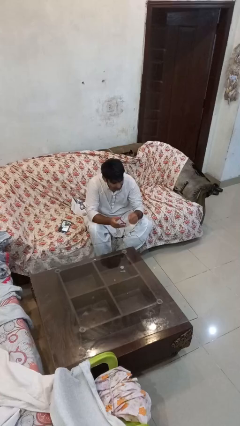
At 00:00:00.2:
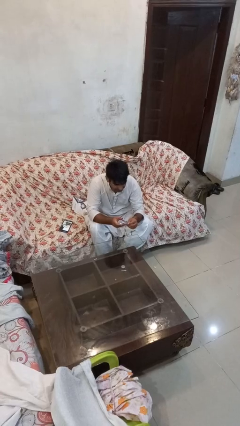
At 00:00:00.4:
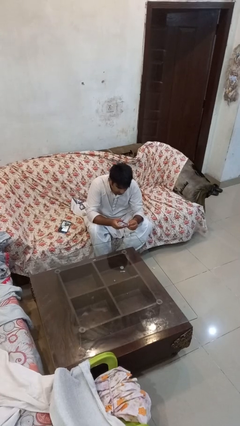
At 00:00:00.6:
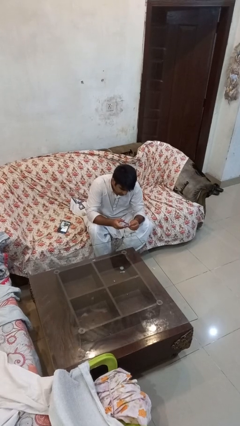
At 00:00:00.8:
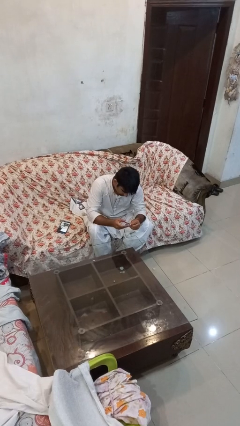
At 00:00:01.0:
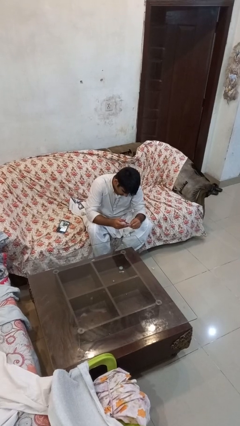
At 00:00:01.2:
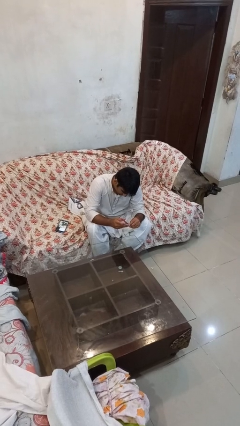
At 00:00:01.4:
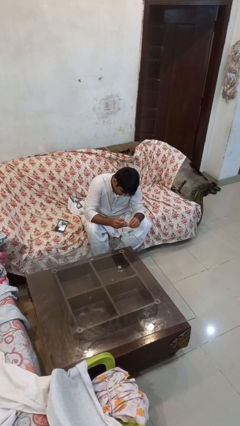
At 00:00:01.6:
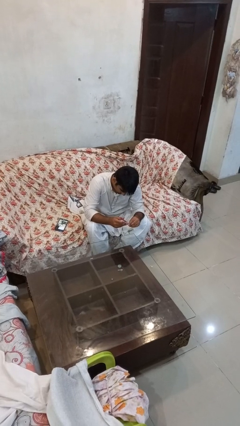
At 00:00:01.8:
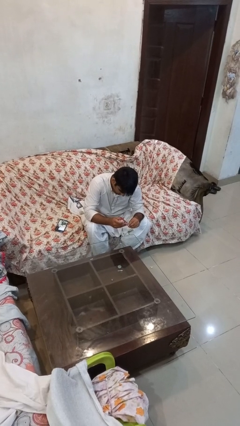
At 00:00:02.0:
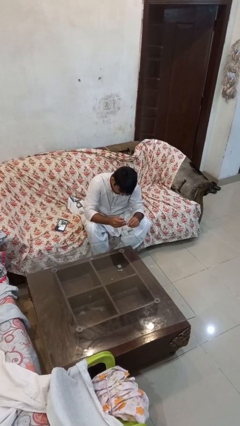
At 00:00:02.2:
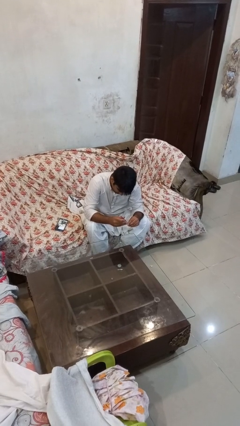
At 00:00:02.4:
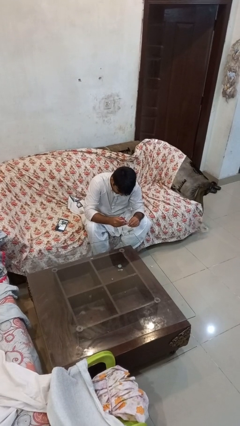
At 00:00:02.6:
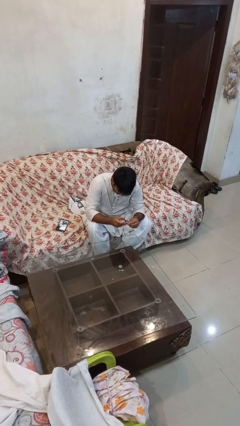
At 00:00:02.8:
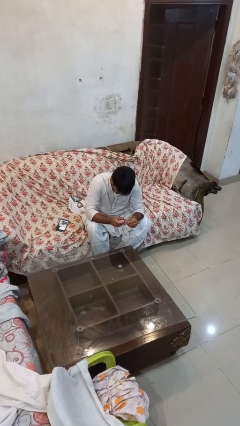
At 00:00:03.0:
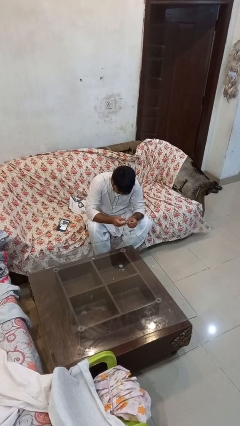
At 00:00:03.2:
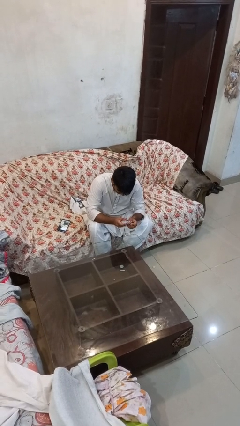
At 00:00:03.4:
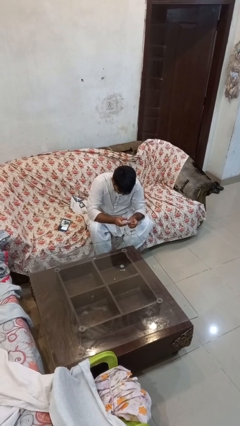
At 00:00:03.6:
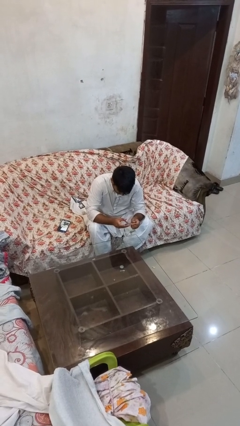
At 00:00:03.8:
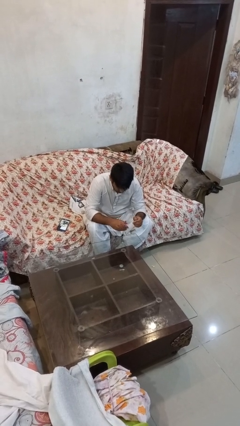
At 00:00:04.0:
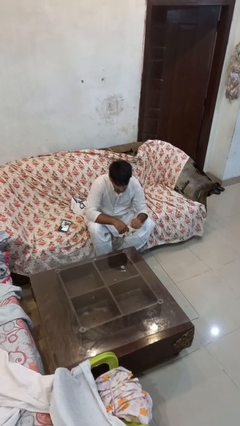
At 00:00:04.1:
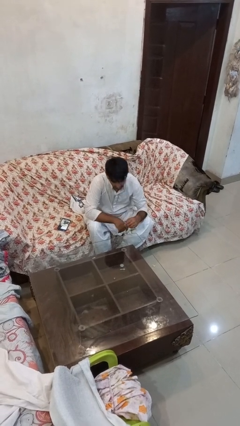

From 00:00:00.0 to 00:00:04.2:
person clips fingernails

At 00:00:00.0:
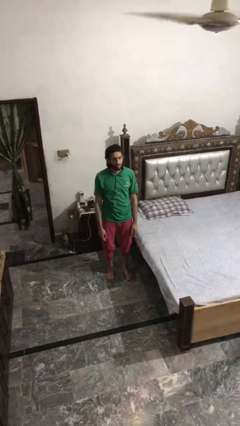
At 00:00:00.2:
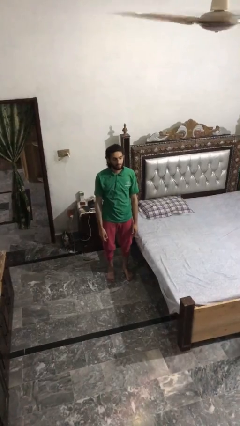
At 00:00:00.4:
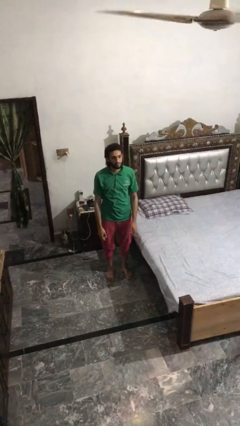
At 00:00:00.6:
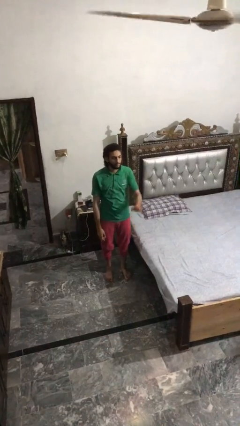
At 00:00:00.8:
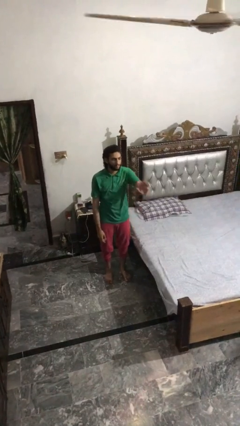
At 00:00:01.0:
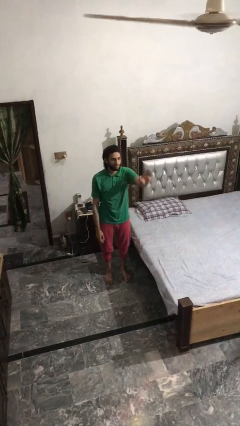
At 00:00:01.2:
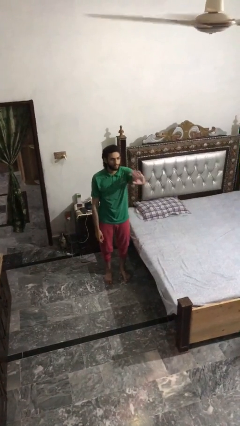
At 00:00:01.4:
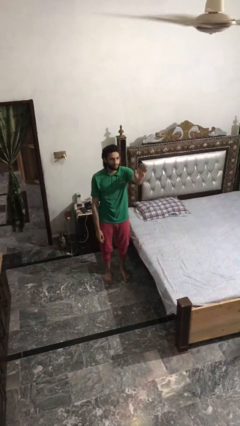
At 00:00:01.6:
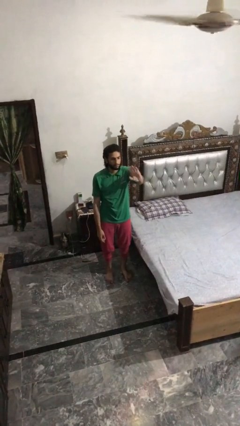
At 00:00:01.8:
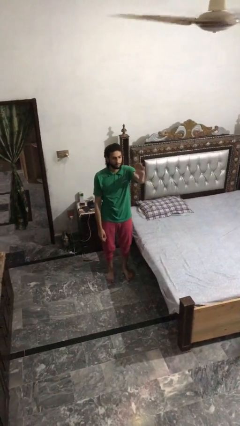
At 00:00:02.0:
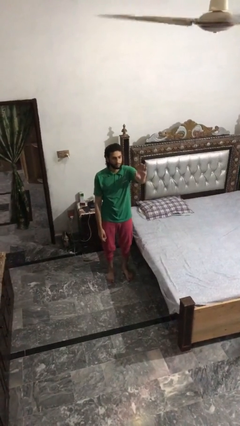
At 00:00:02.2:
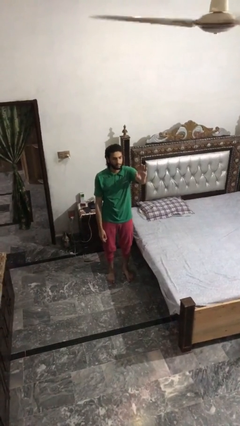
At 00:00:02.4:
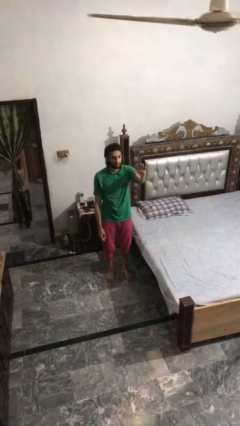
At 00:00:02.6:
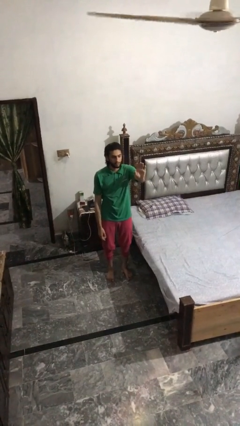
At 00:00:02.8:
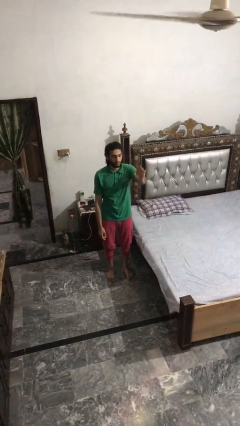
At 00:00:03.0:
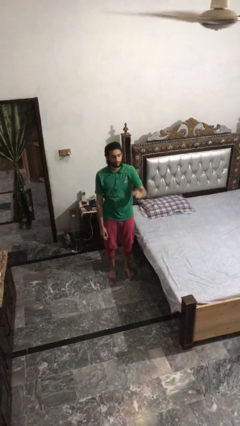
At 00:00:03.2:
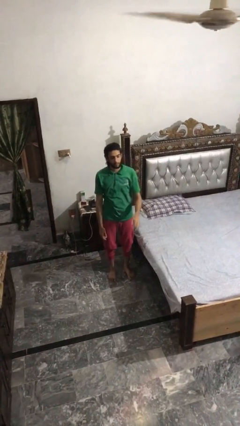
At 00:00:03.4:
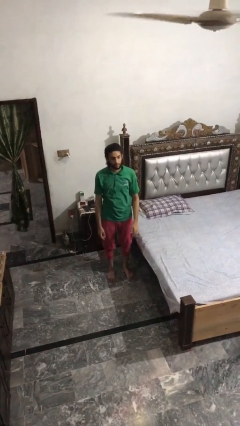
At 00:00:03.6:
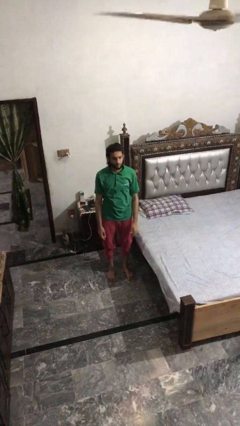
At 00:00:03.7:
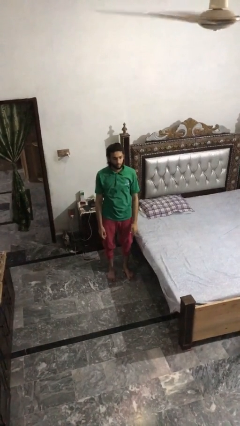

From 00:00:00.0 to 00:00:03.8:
person waves at person

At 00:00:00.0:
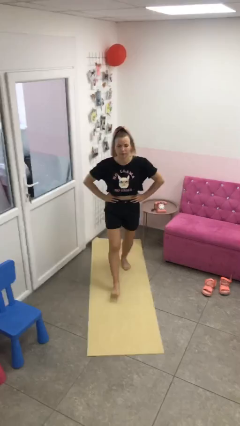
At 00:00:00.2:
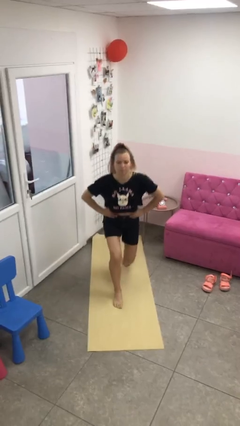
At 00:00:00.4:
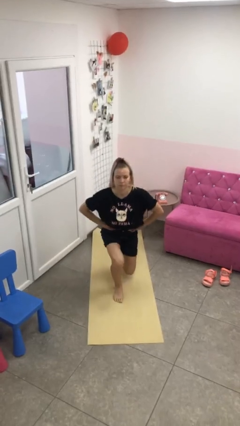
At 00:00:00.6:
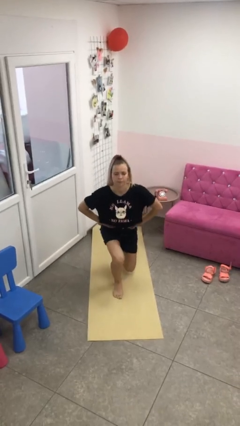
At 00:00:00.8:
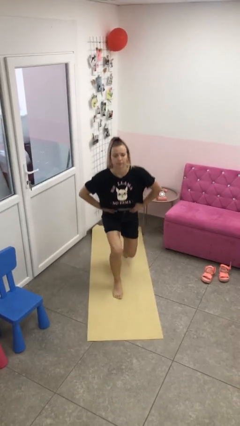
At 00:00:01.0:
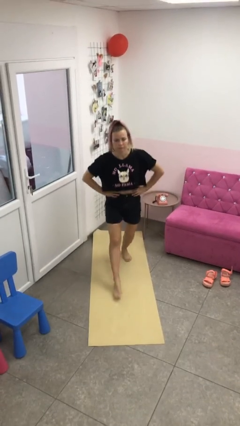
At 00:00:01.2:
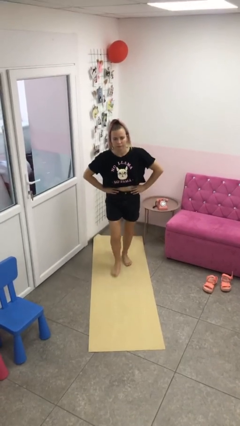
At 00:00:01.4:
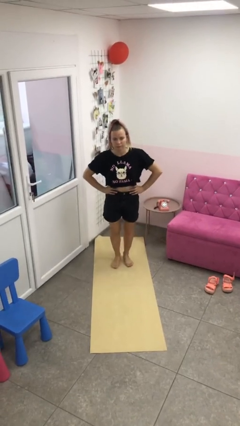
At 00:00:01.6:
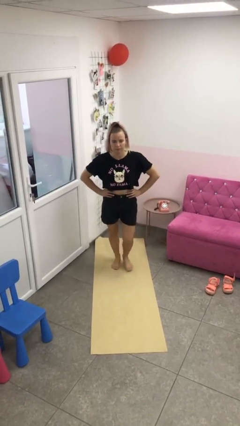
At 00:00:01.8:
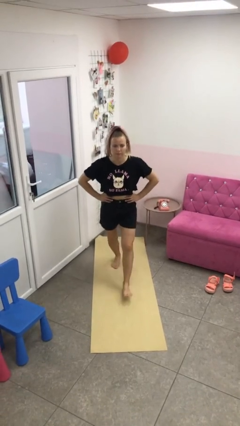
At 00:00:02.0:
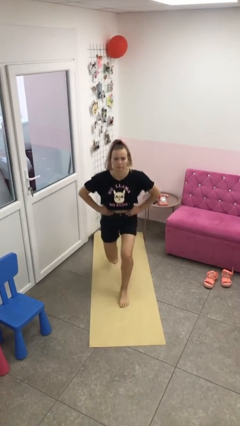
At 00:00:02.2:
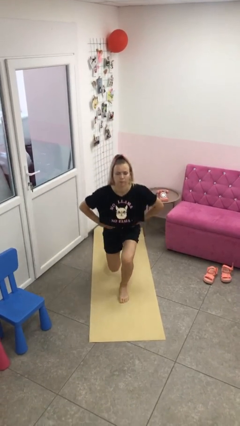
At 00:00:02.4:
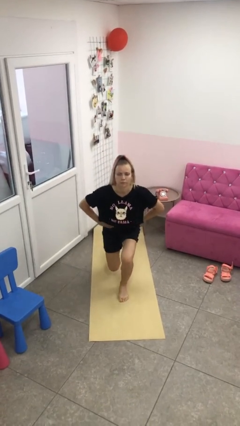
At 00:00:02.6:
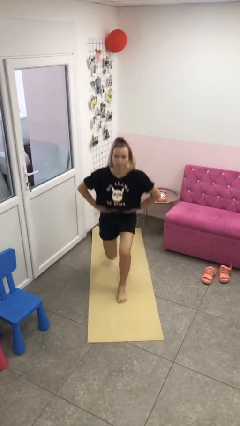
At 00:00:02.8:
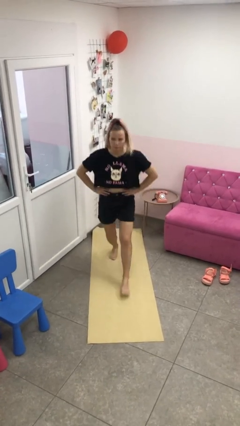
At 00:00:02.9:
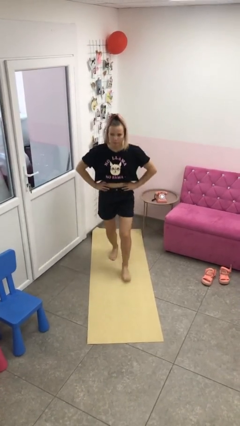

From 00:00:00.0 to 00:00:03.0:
person exercises with lunges

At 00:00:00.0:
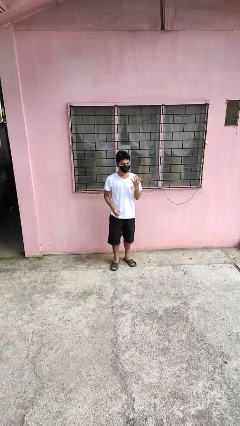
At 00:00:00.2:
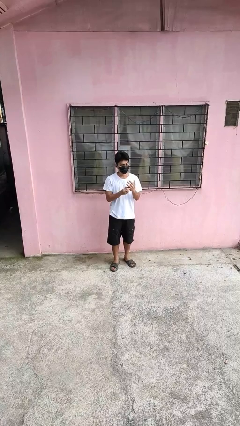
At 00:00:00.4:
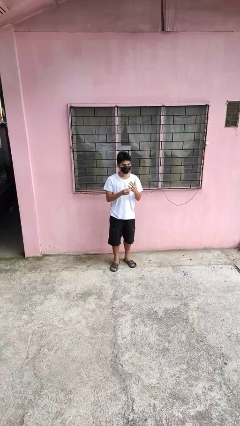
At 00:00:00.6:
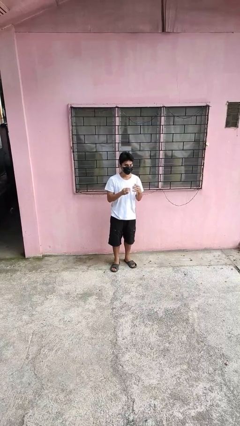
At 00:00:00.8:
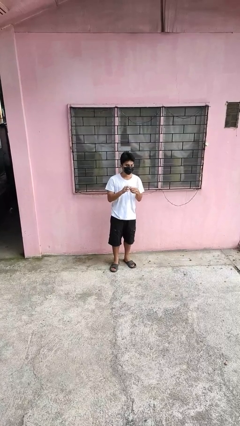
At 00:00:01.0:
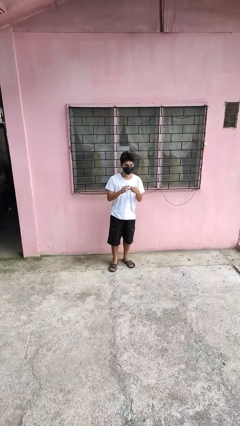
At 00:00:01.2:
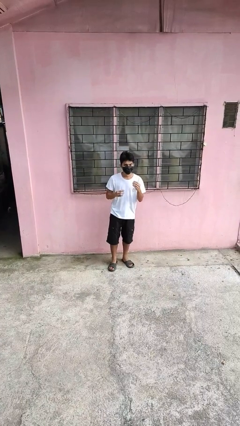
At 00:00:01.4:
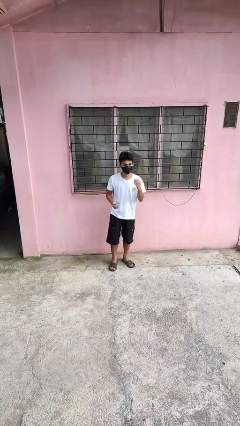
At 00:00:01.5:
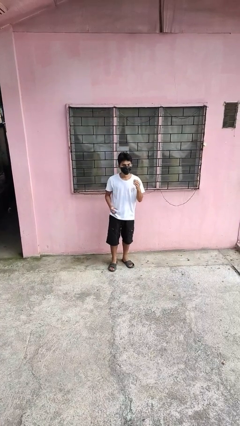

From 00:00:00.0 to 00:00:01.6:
person takes off ring

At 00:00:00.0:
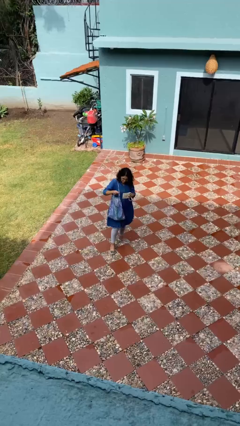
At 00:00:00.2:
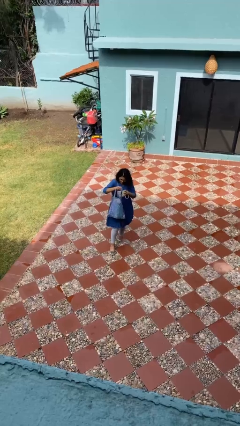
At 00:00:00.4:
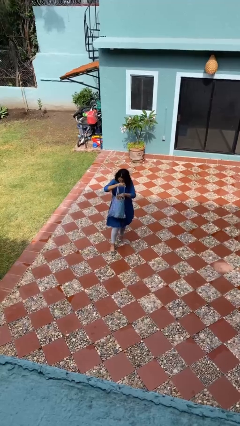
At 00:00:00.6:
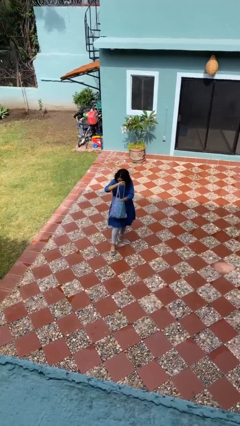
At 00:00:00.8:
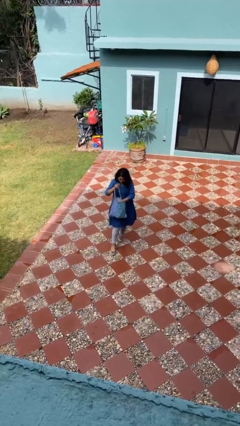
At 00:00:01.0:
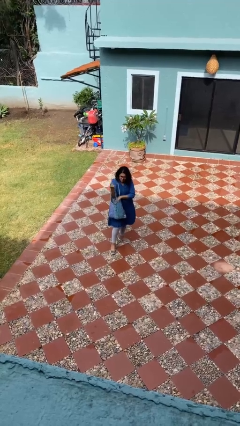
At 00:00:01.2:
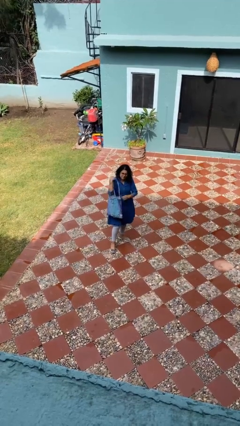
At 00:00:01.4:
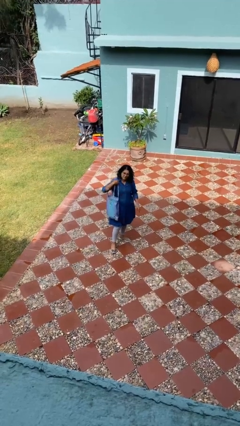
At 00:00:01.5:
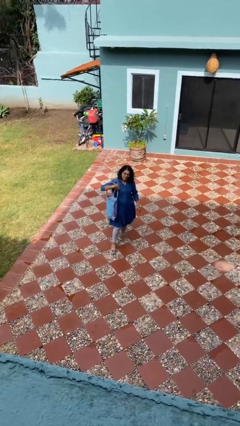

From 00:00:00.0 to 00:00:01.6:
person puts object into purse

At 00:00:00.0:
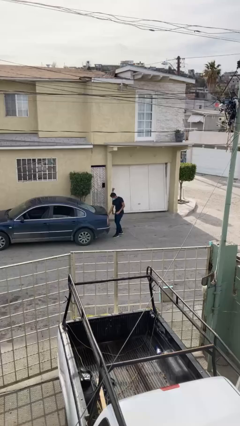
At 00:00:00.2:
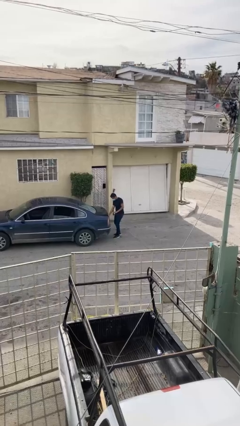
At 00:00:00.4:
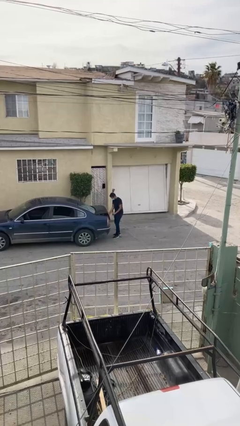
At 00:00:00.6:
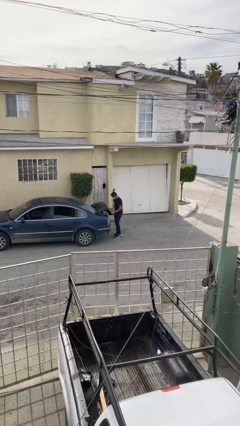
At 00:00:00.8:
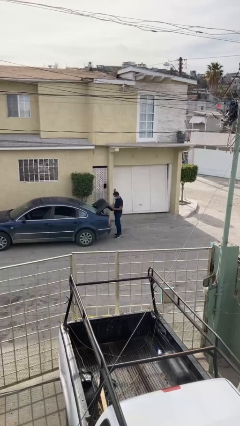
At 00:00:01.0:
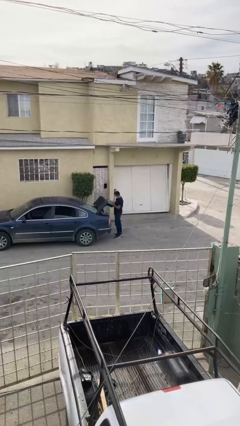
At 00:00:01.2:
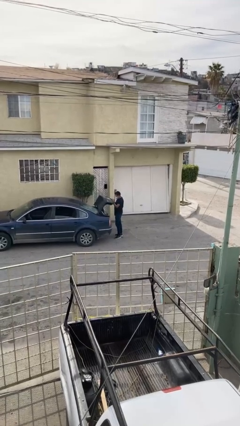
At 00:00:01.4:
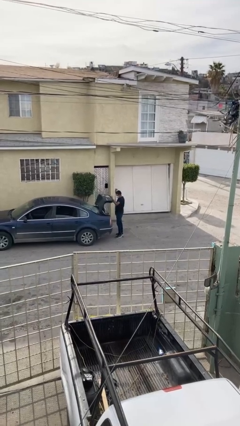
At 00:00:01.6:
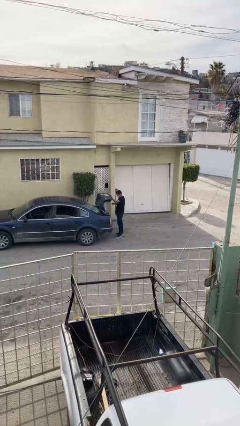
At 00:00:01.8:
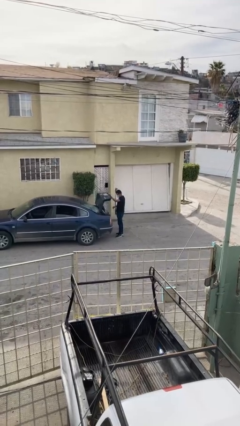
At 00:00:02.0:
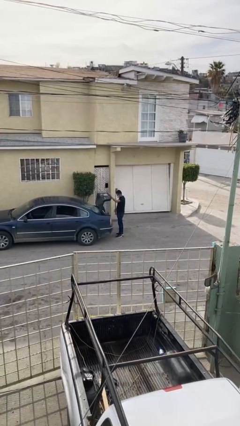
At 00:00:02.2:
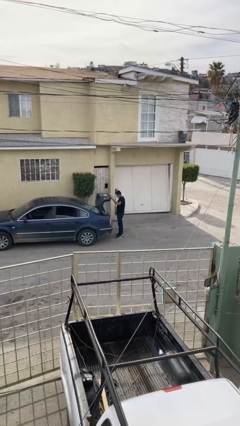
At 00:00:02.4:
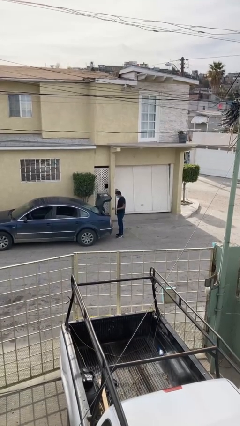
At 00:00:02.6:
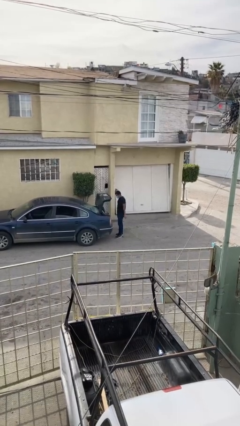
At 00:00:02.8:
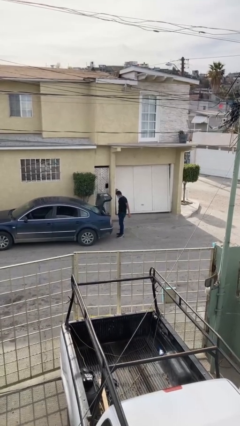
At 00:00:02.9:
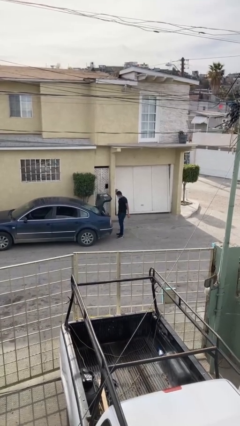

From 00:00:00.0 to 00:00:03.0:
person opens car trunk
